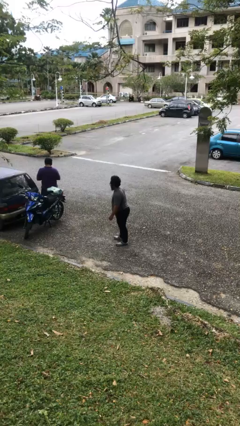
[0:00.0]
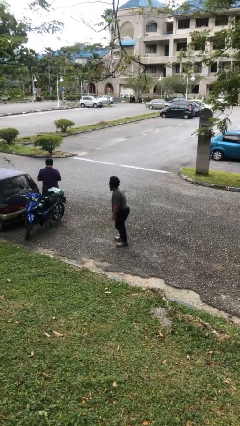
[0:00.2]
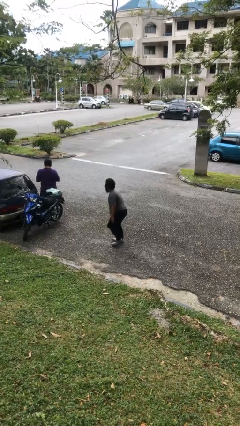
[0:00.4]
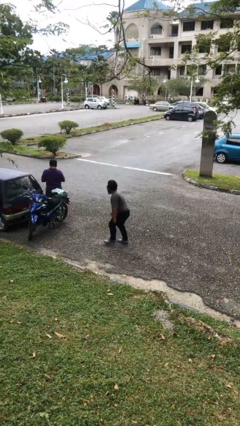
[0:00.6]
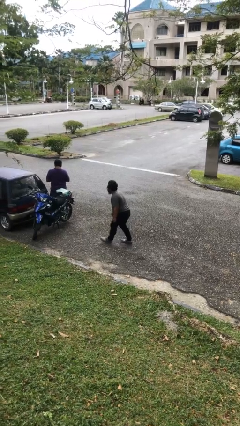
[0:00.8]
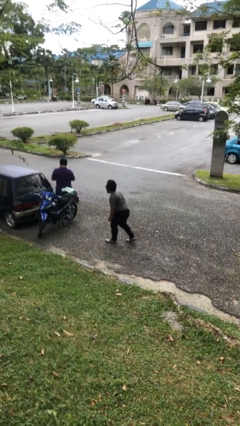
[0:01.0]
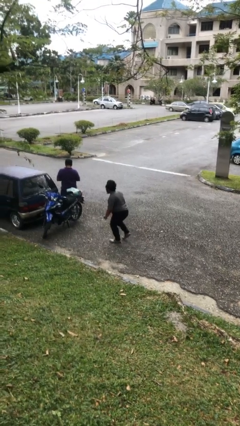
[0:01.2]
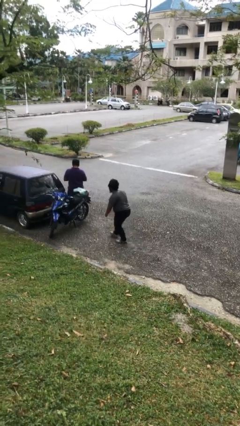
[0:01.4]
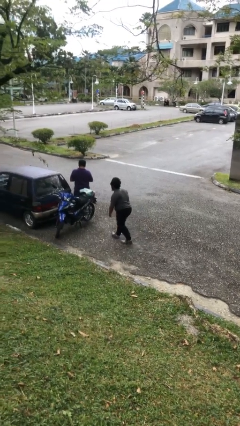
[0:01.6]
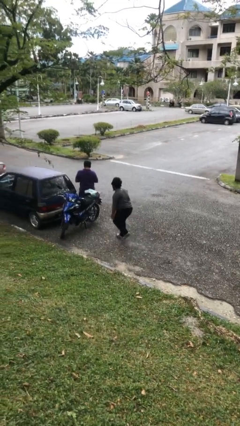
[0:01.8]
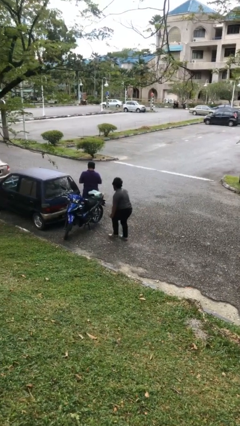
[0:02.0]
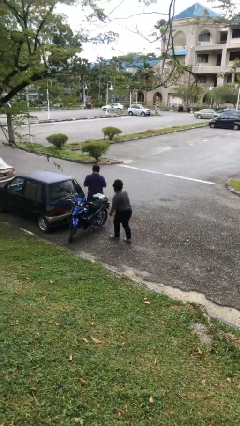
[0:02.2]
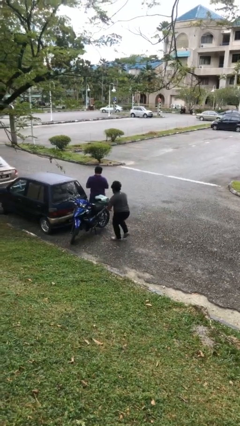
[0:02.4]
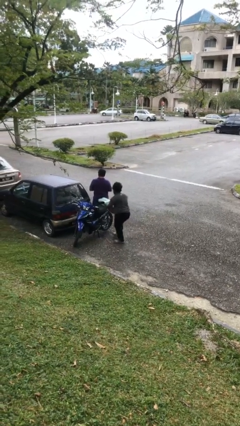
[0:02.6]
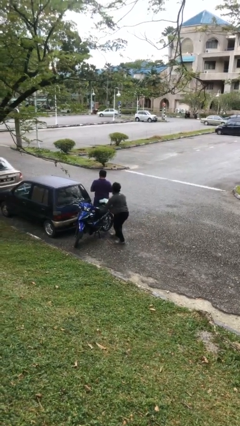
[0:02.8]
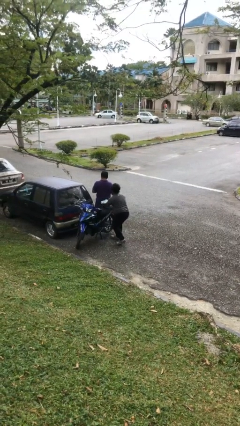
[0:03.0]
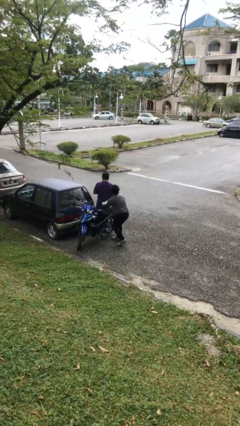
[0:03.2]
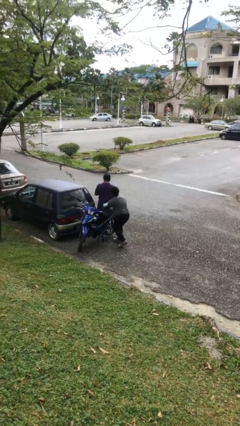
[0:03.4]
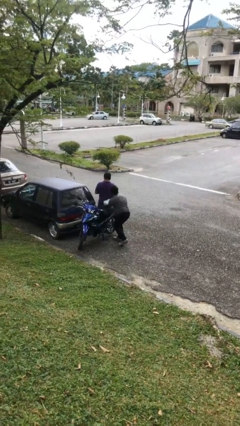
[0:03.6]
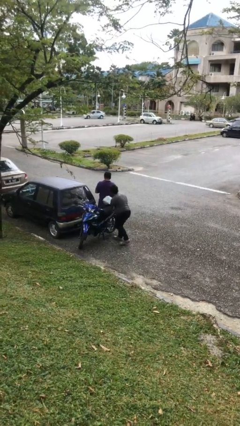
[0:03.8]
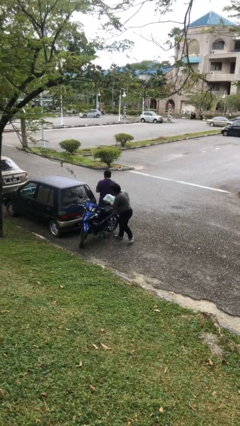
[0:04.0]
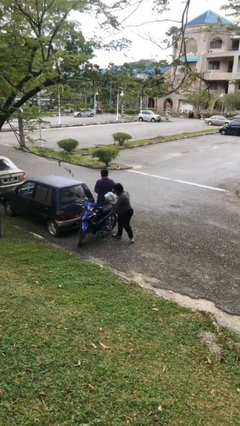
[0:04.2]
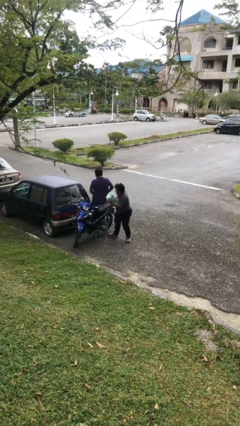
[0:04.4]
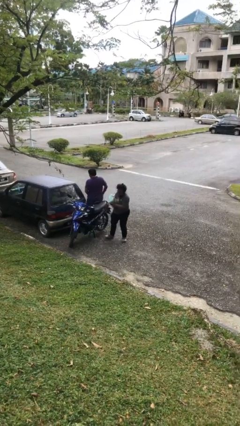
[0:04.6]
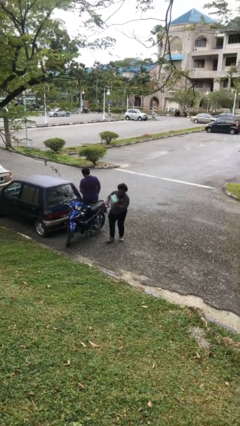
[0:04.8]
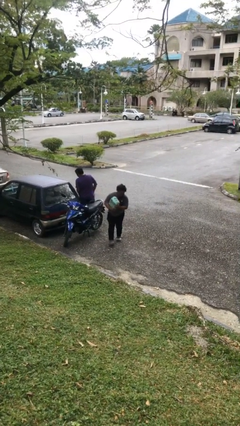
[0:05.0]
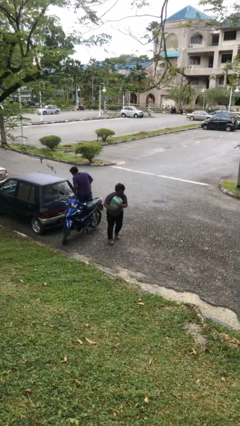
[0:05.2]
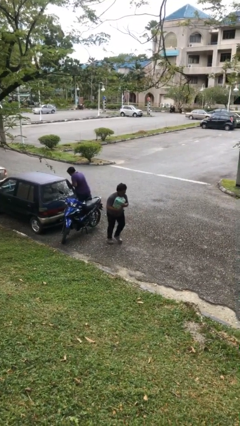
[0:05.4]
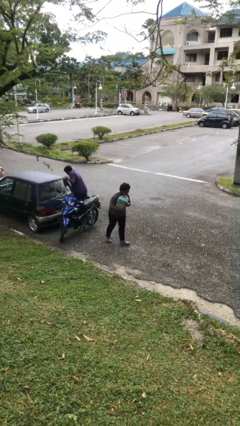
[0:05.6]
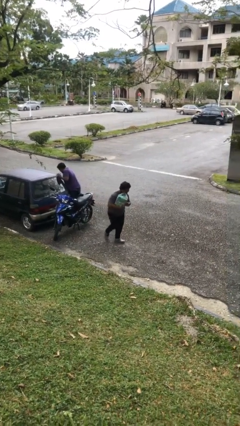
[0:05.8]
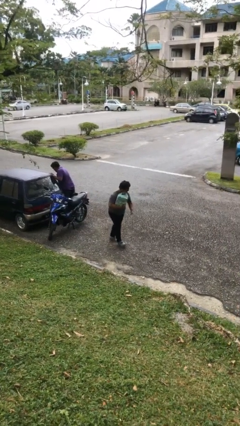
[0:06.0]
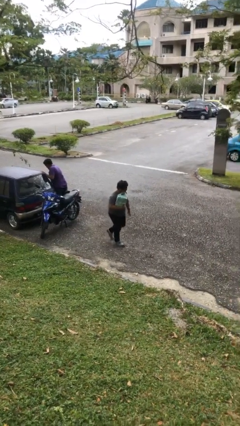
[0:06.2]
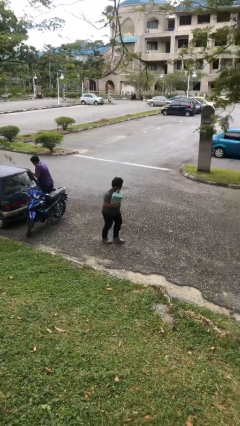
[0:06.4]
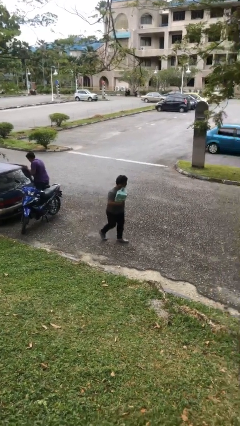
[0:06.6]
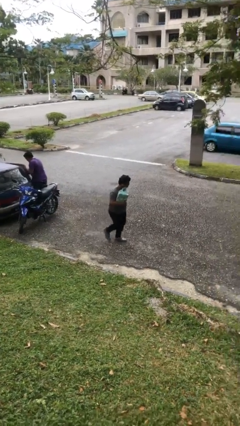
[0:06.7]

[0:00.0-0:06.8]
person steals object from person

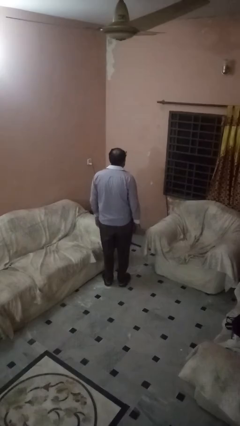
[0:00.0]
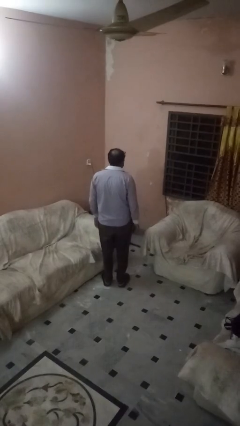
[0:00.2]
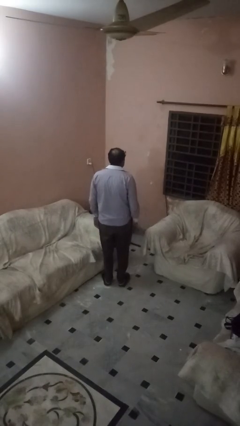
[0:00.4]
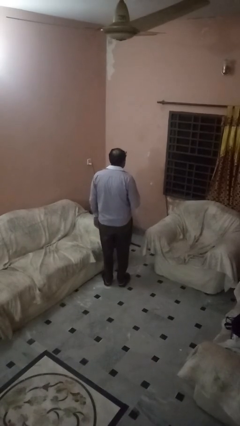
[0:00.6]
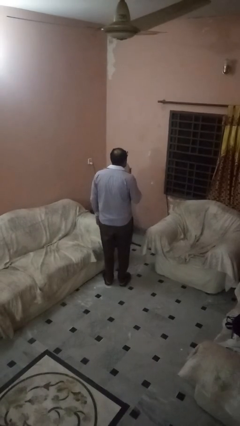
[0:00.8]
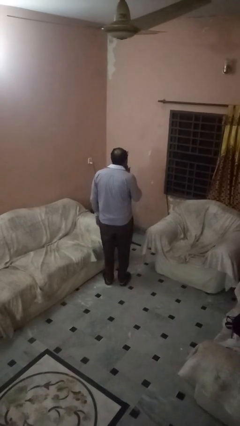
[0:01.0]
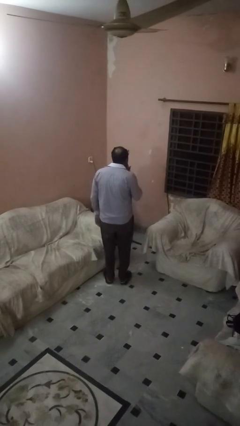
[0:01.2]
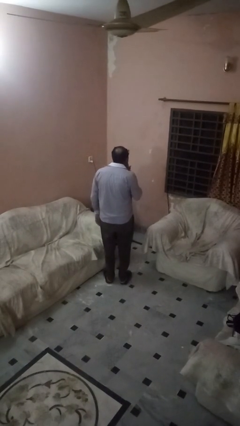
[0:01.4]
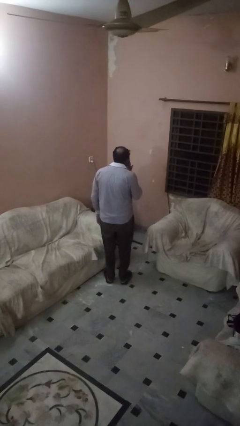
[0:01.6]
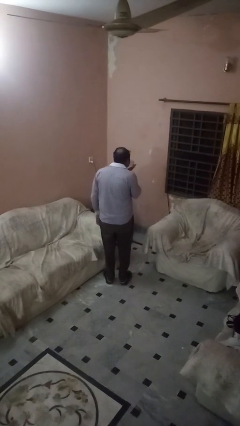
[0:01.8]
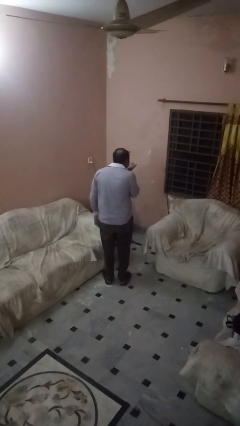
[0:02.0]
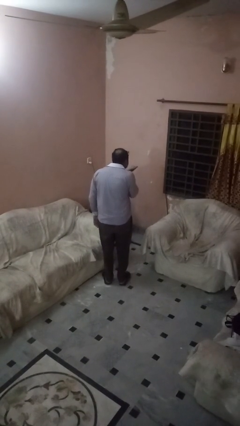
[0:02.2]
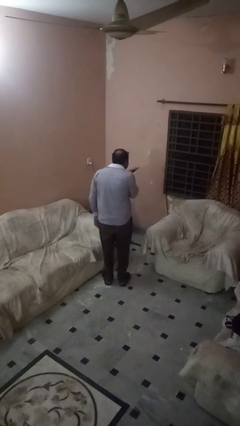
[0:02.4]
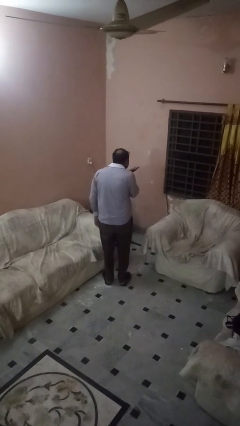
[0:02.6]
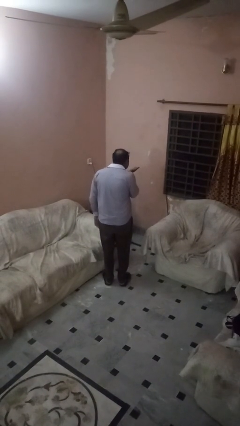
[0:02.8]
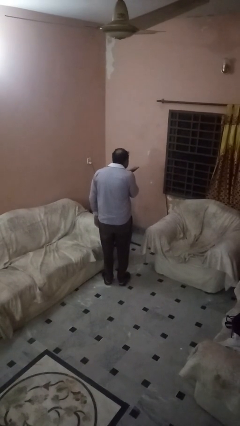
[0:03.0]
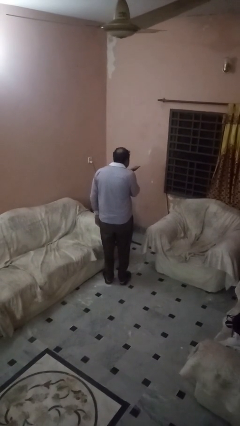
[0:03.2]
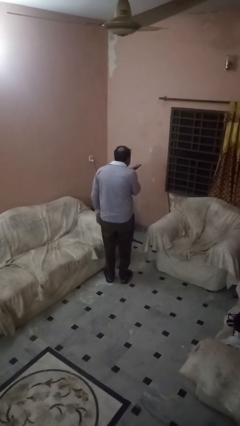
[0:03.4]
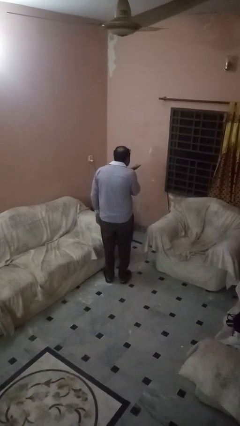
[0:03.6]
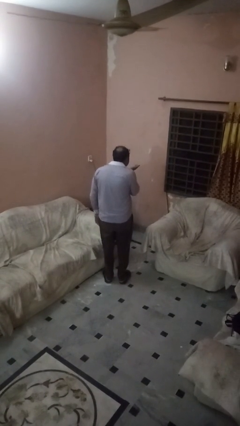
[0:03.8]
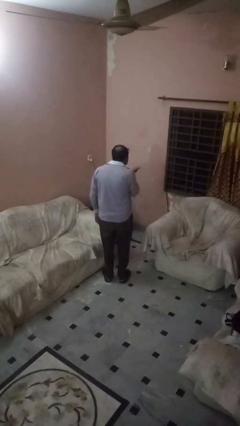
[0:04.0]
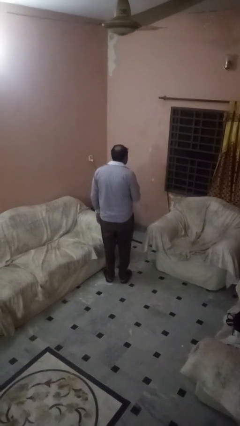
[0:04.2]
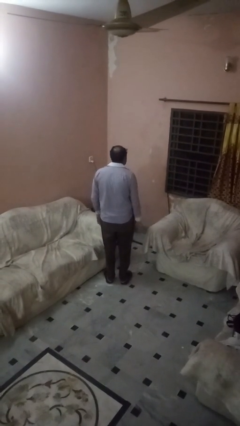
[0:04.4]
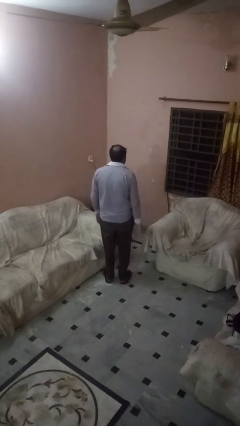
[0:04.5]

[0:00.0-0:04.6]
person gestures blow kiss

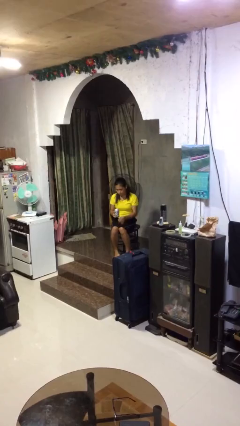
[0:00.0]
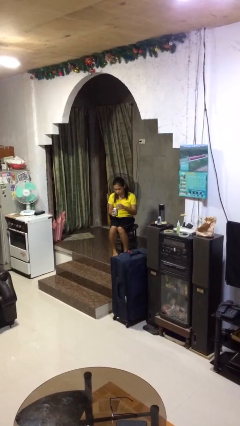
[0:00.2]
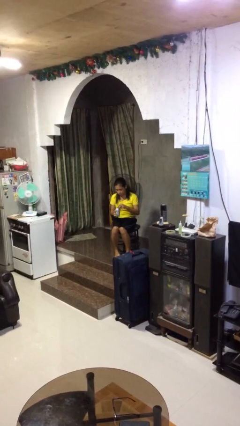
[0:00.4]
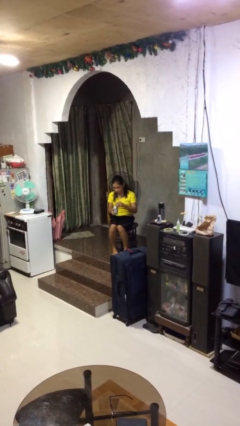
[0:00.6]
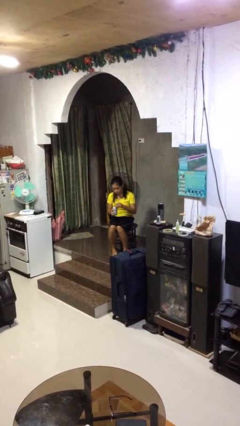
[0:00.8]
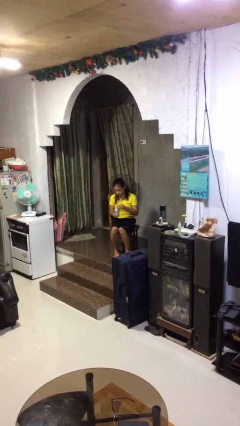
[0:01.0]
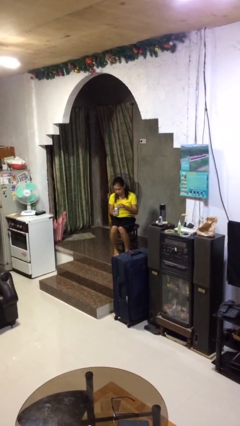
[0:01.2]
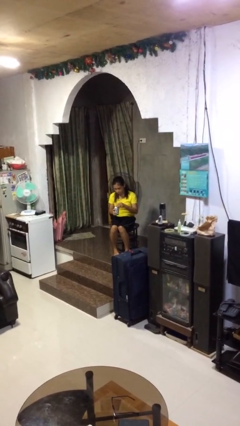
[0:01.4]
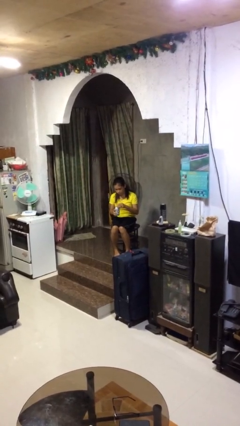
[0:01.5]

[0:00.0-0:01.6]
person opens beverage can

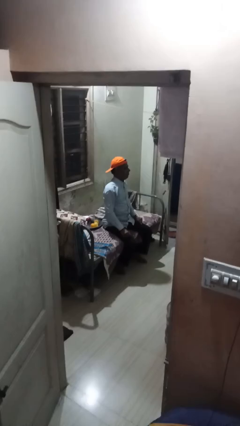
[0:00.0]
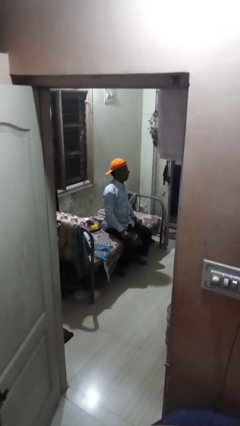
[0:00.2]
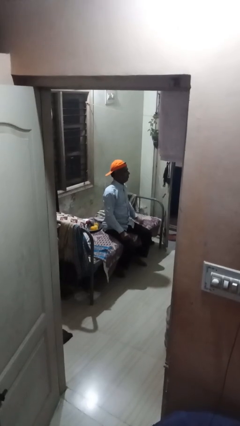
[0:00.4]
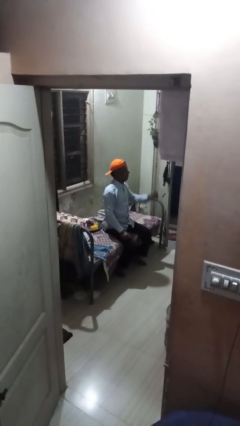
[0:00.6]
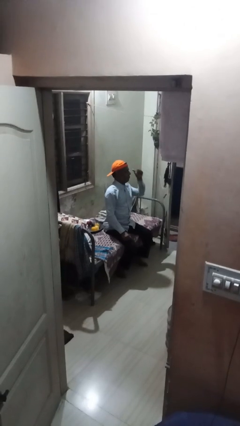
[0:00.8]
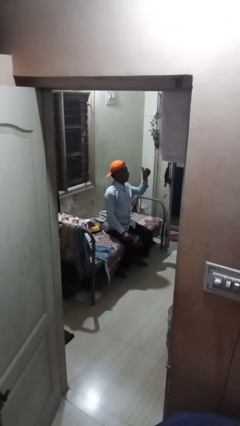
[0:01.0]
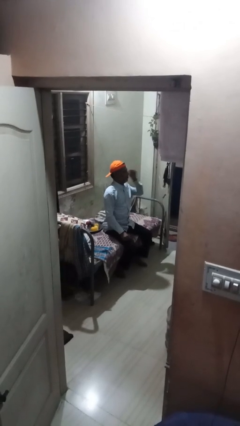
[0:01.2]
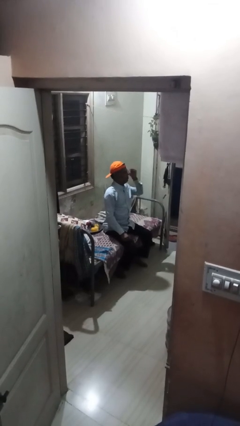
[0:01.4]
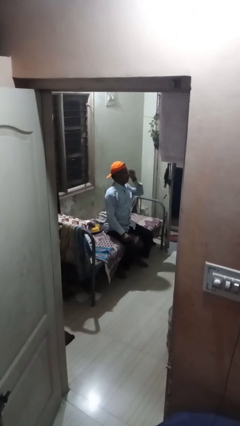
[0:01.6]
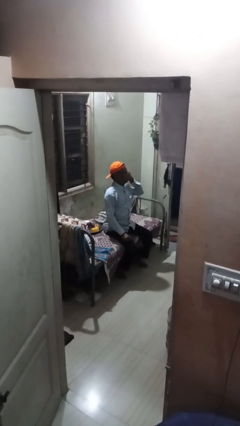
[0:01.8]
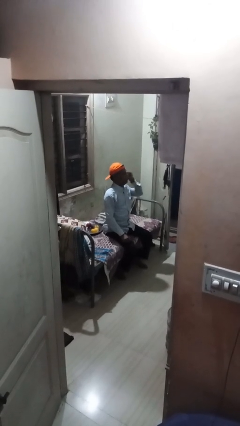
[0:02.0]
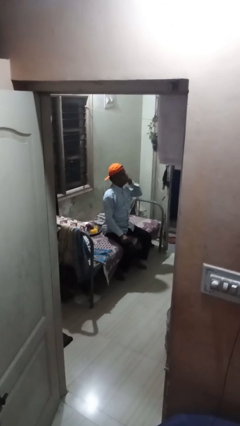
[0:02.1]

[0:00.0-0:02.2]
person gestures behind me

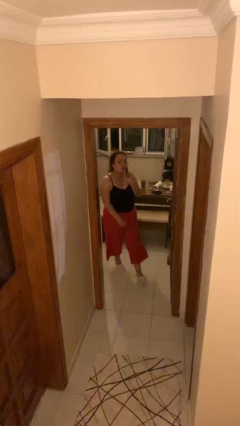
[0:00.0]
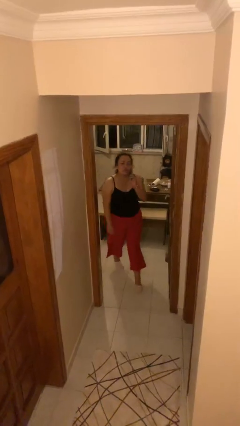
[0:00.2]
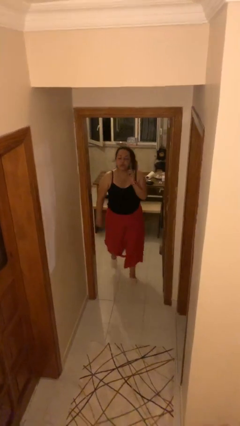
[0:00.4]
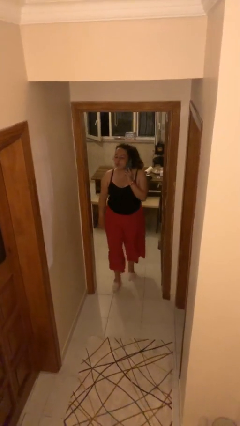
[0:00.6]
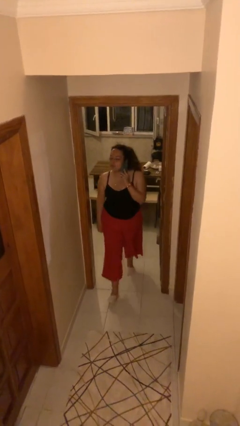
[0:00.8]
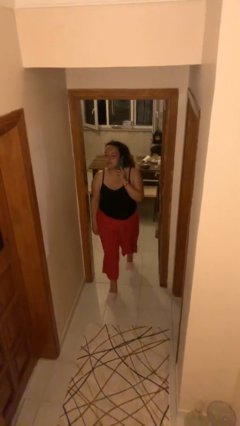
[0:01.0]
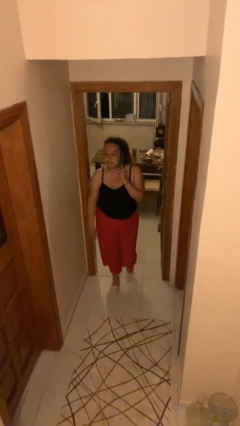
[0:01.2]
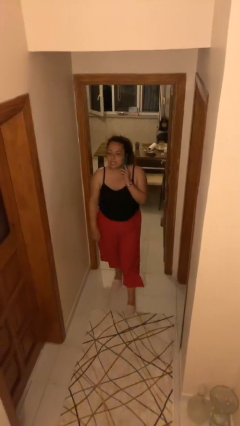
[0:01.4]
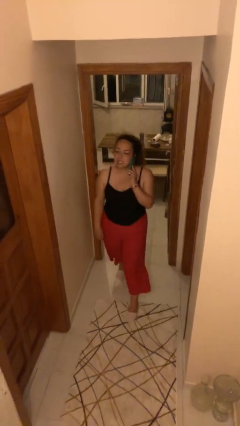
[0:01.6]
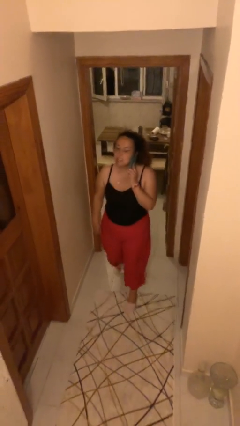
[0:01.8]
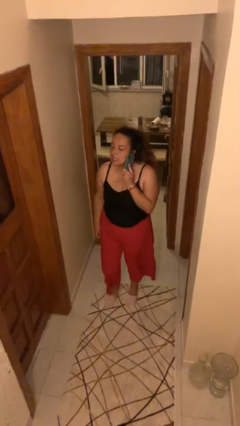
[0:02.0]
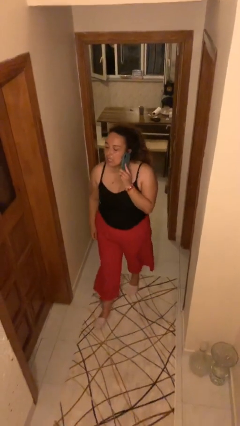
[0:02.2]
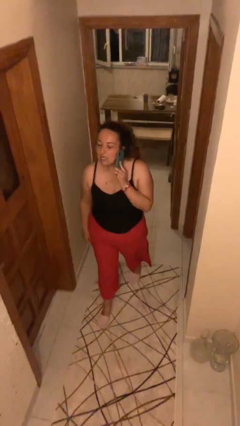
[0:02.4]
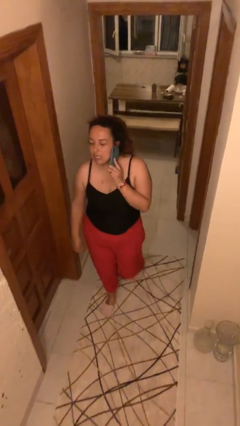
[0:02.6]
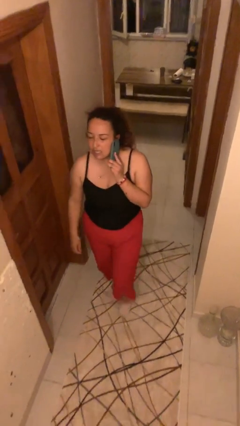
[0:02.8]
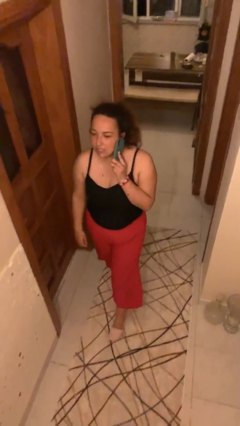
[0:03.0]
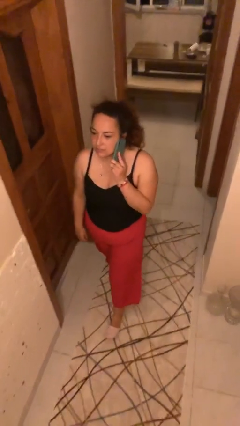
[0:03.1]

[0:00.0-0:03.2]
person enters scene through structure
